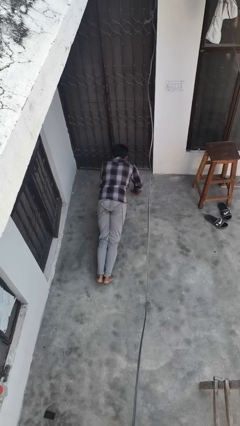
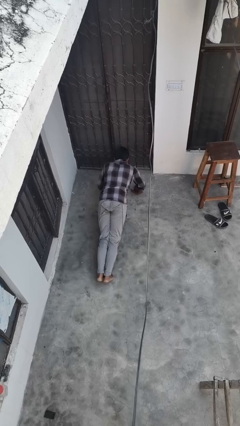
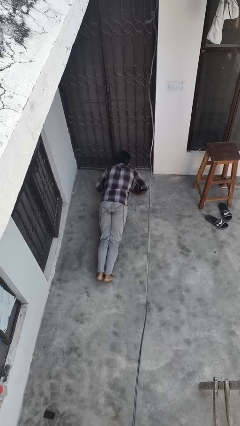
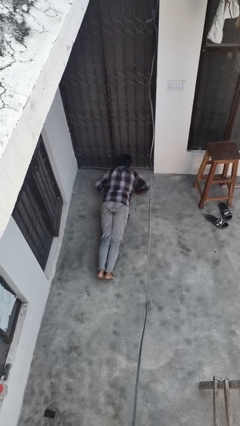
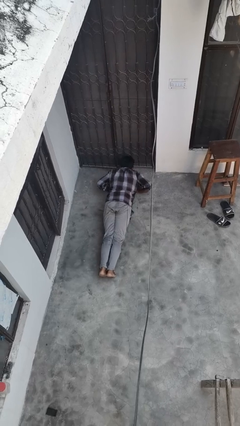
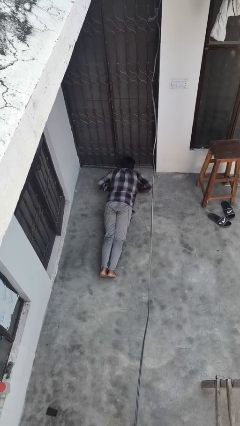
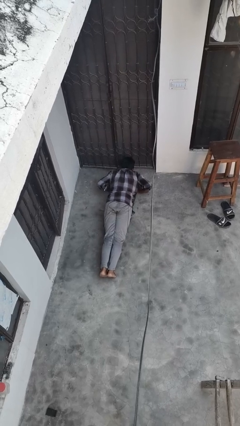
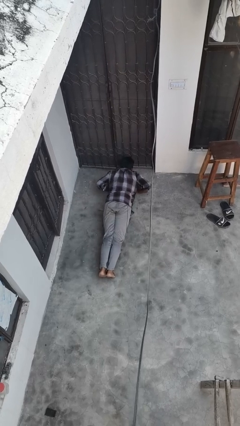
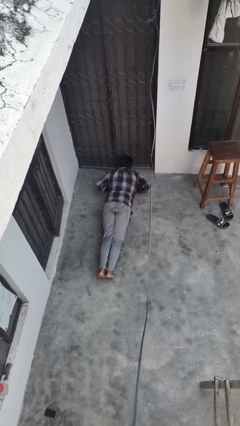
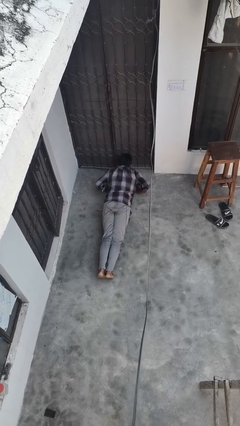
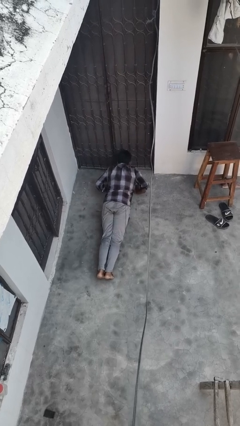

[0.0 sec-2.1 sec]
person exercises with pushup

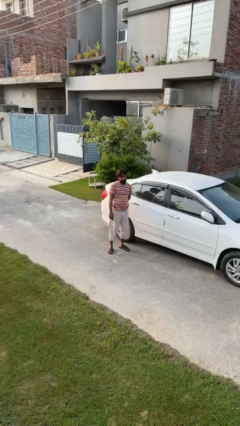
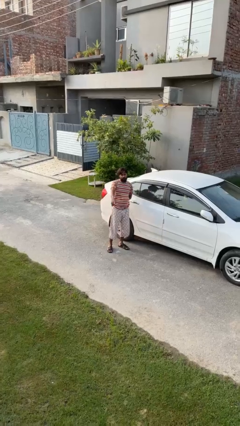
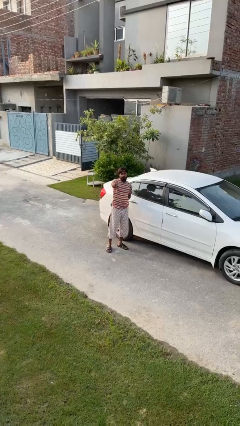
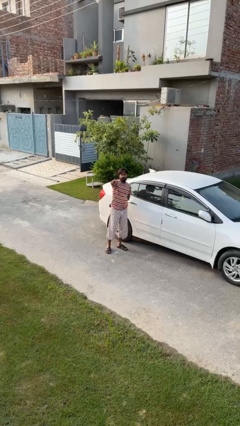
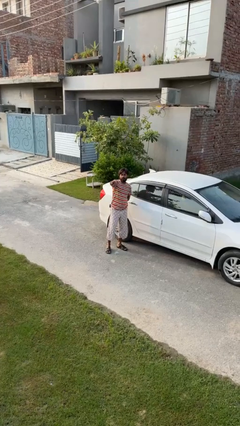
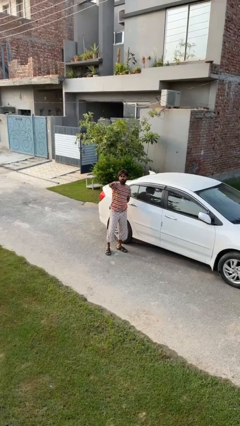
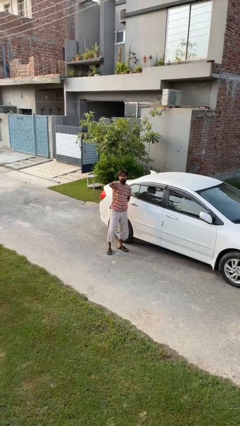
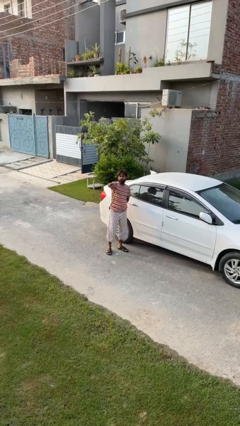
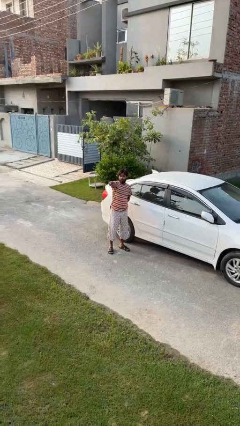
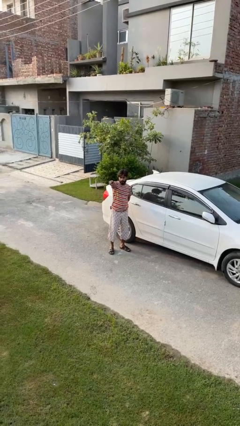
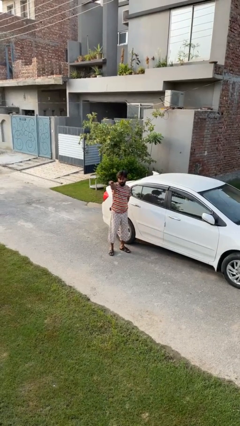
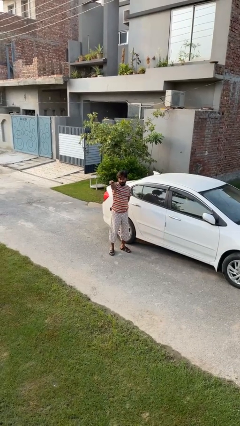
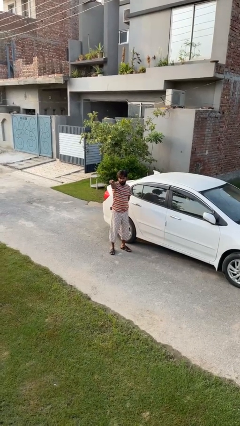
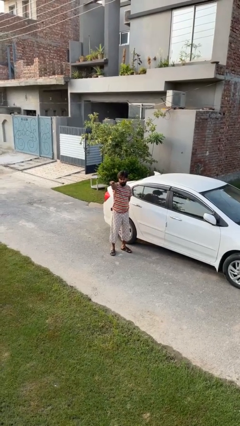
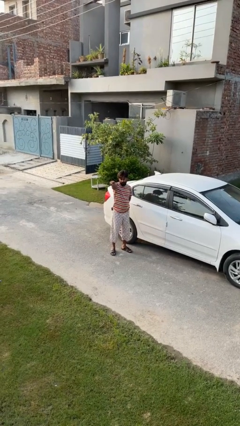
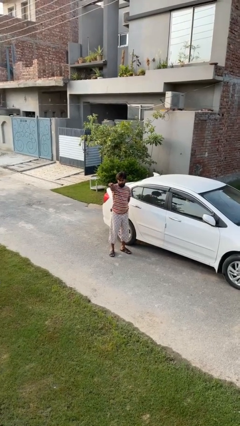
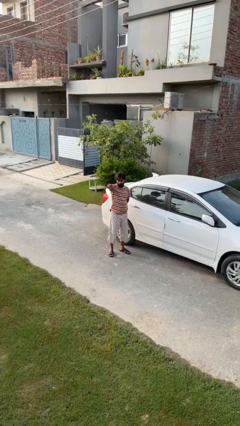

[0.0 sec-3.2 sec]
person points at person

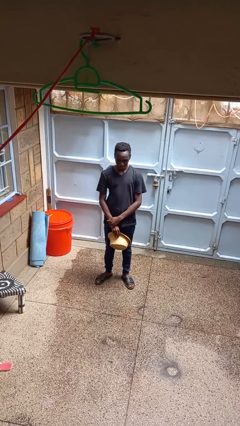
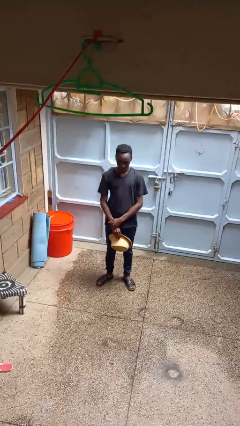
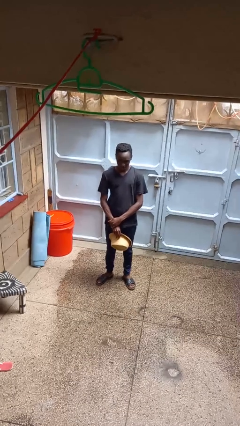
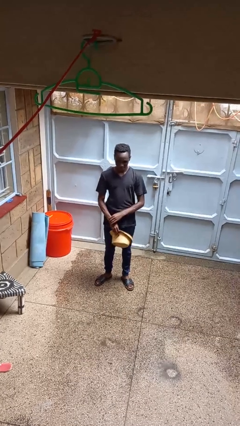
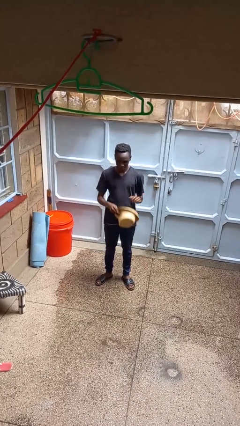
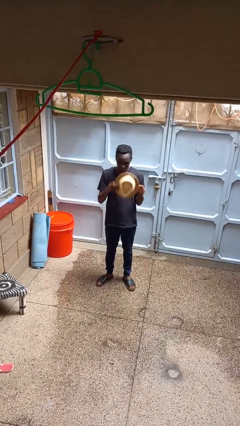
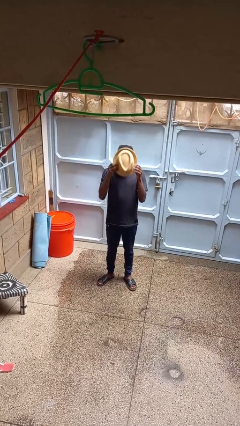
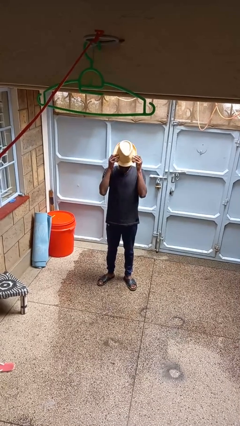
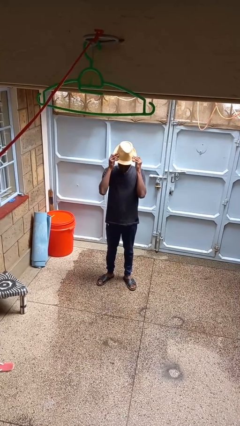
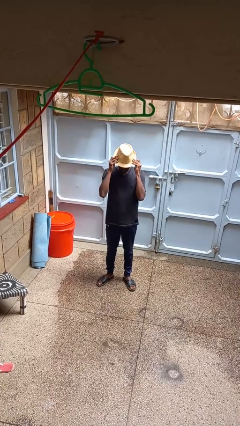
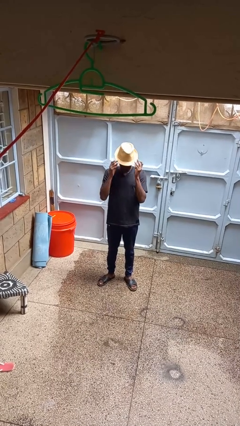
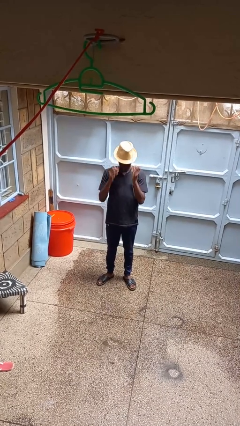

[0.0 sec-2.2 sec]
person puts on hat

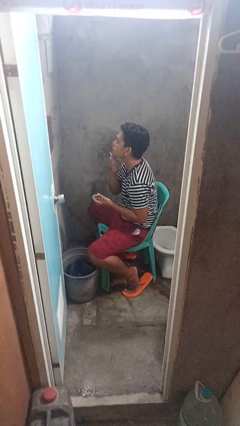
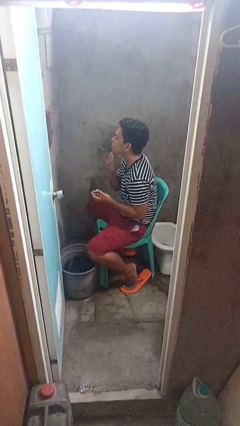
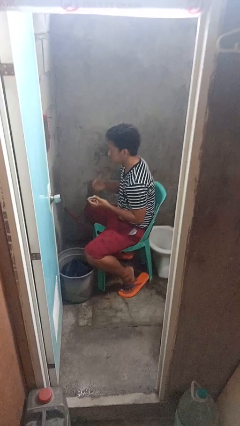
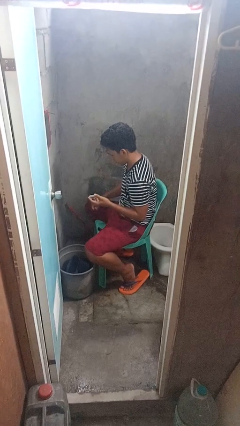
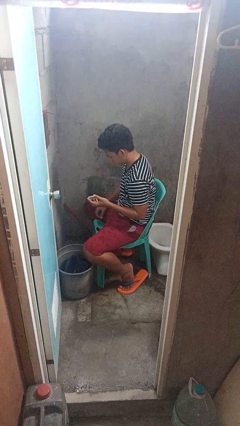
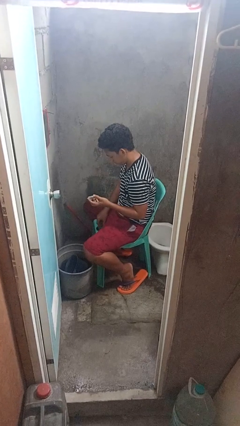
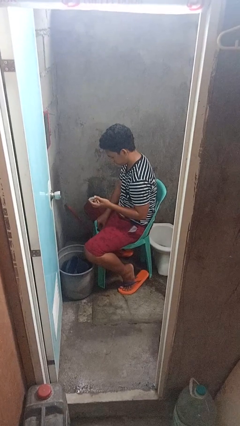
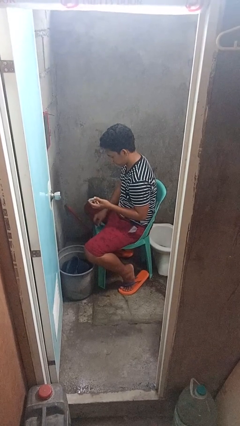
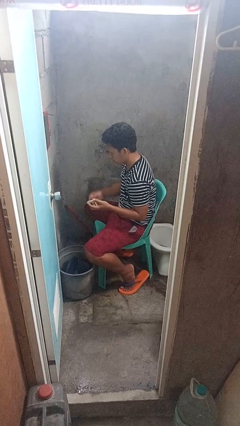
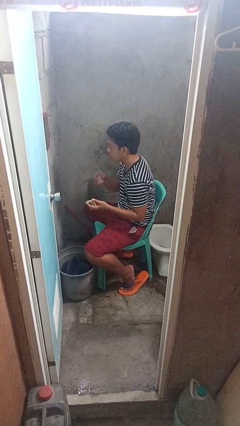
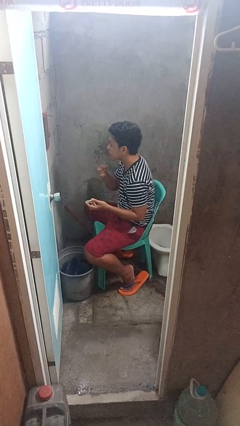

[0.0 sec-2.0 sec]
person applies shaving cream

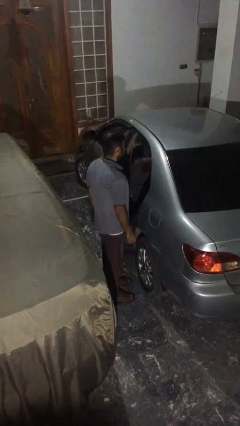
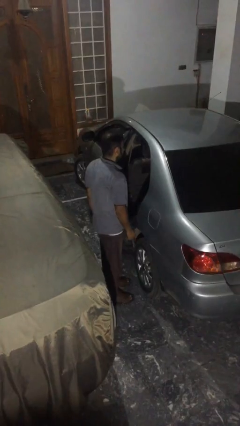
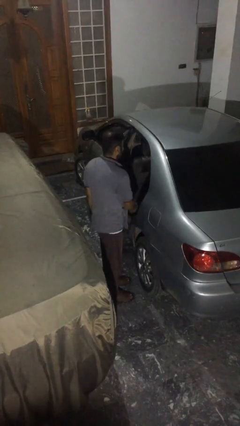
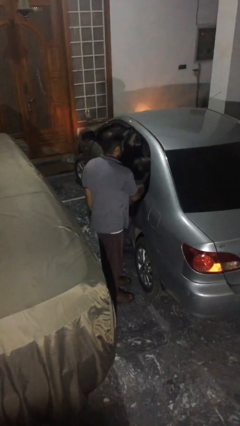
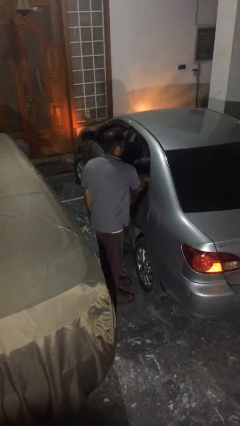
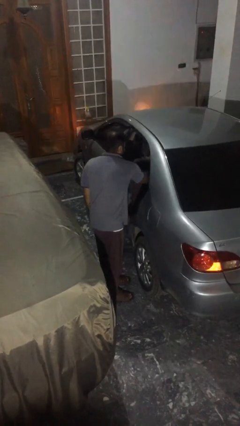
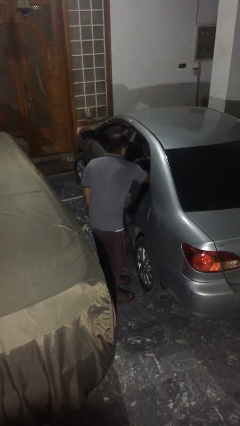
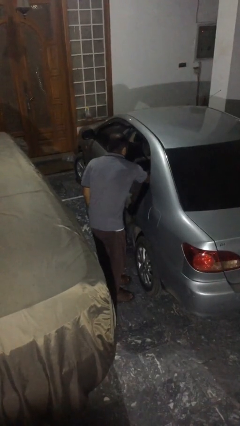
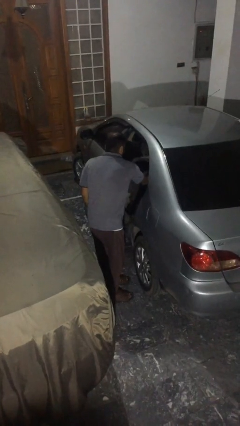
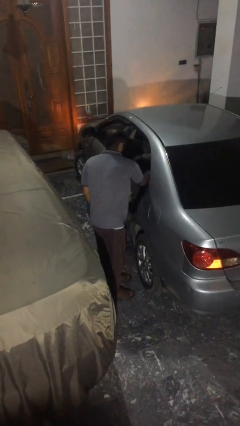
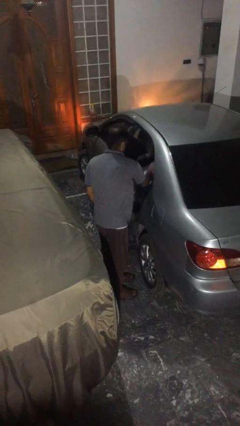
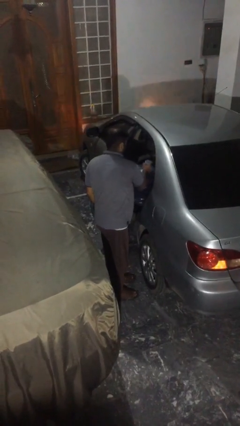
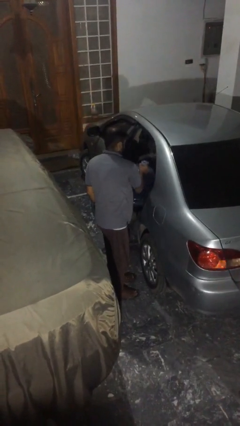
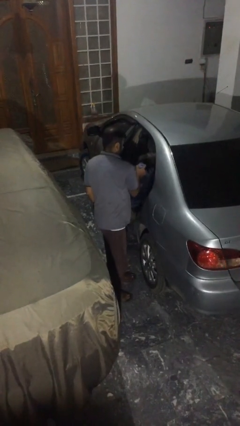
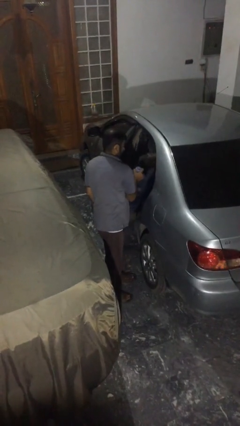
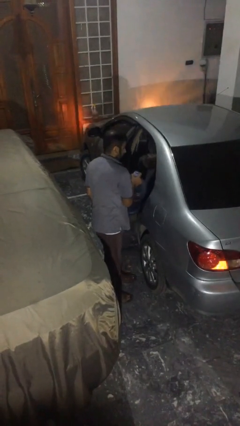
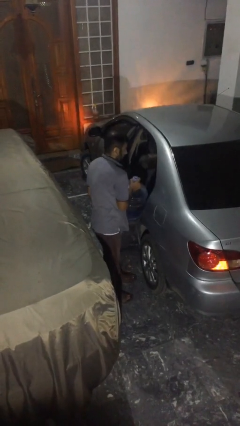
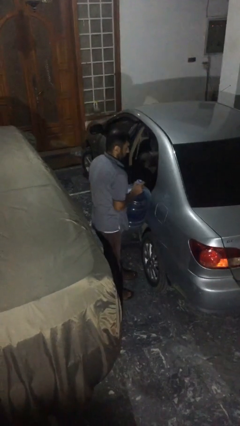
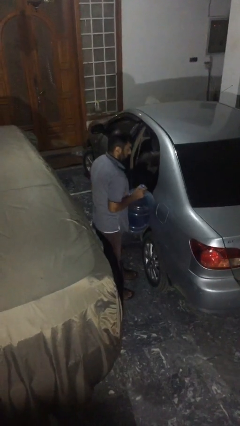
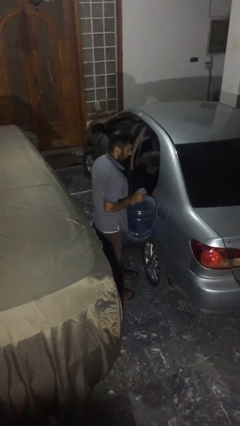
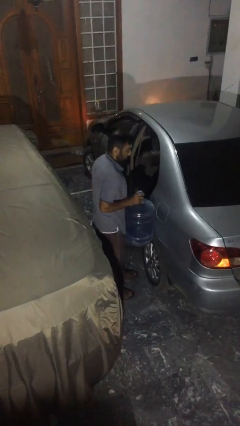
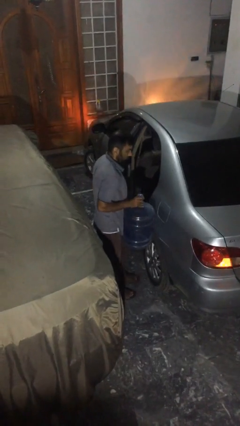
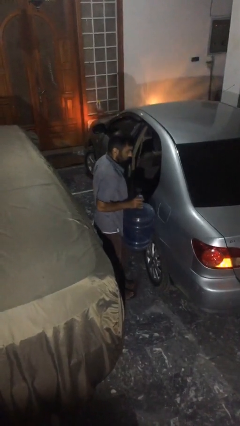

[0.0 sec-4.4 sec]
person unloads car

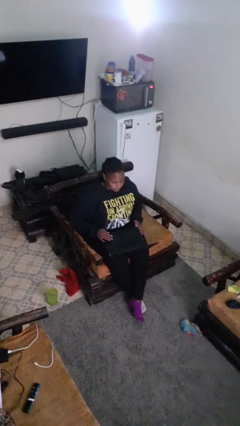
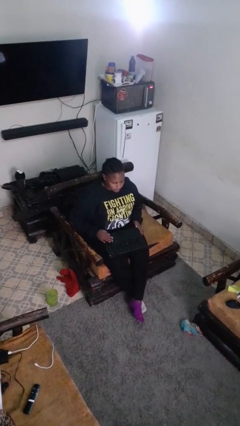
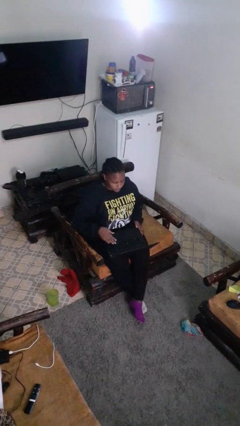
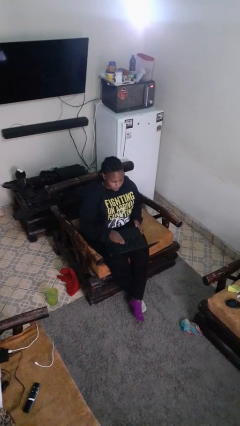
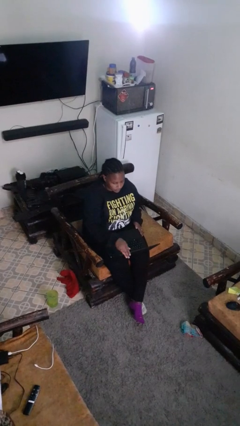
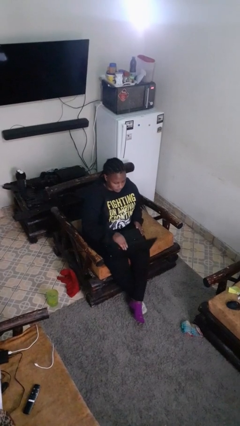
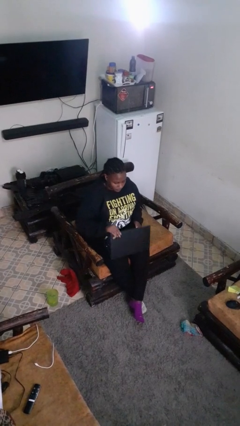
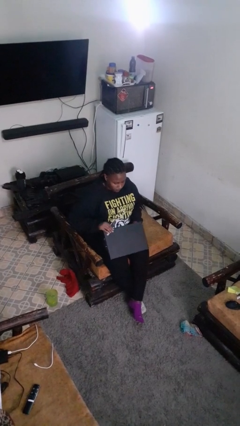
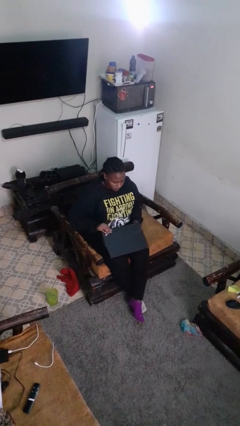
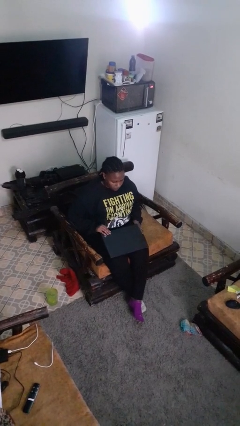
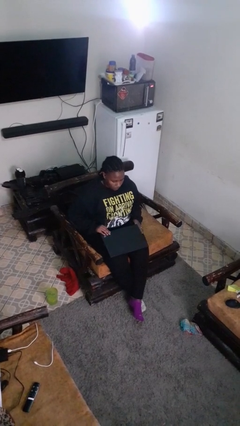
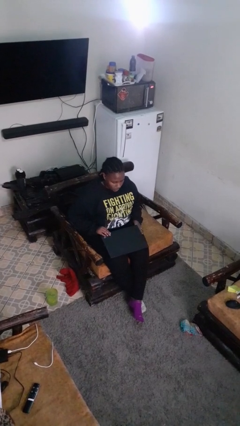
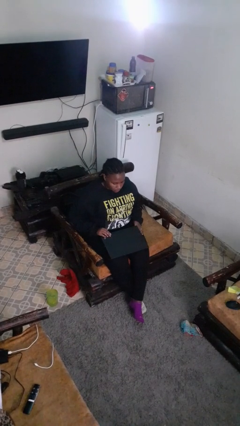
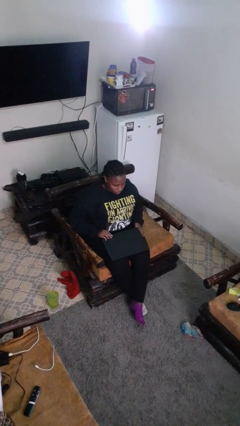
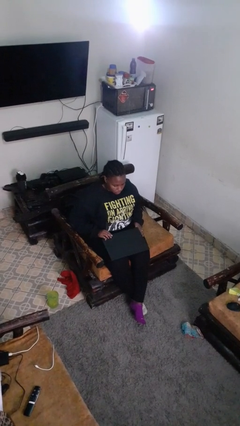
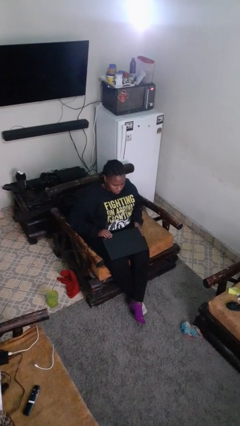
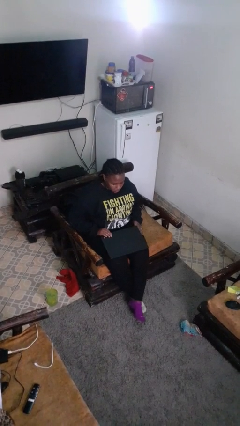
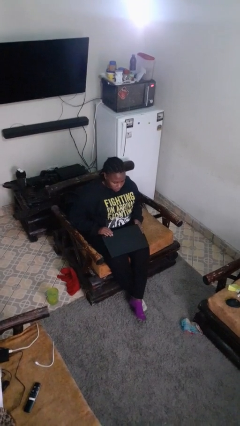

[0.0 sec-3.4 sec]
person closes laptop
